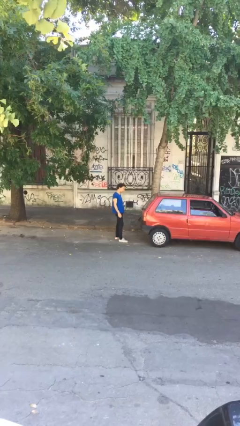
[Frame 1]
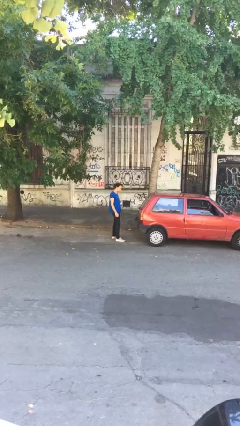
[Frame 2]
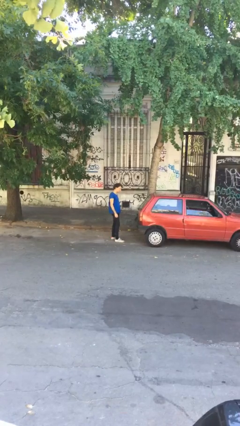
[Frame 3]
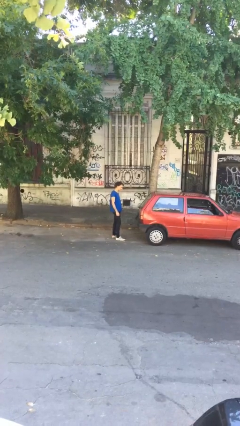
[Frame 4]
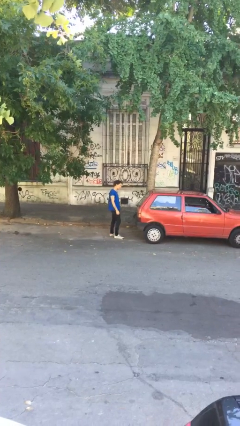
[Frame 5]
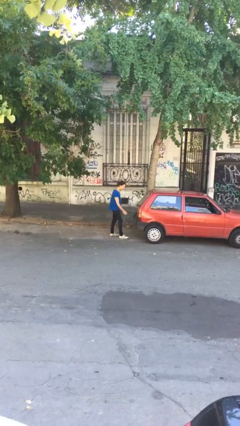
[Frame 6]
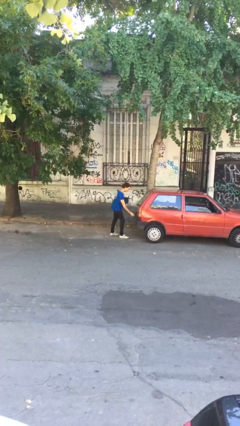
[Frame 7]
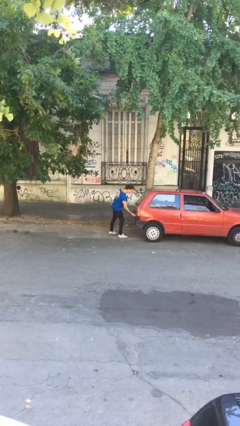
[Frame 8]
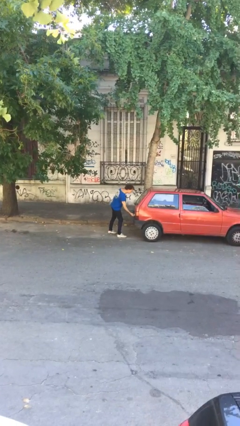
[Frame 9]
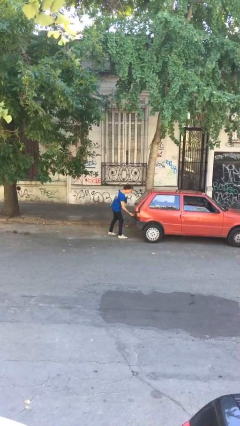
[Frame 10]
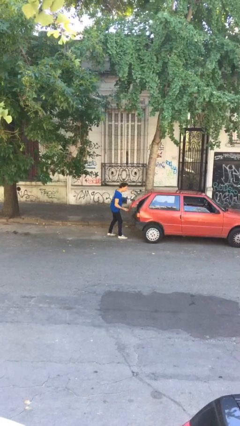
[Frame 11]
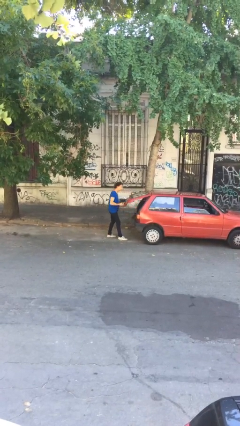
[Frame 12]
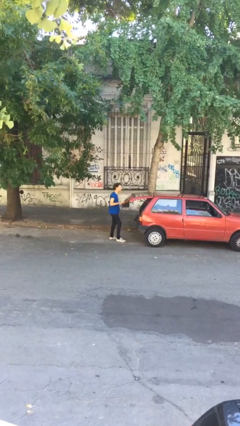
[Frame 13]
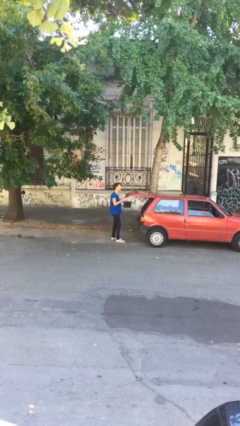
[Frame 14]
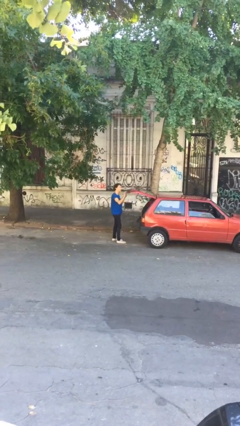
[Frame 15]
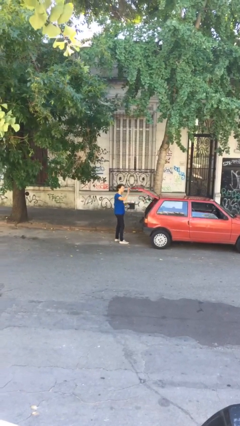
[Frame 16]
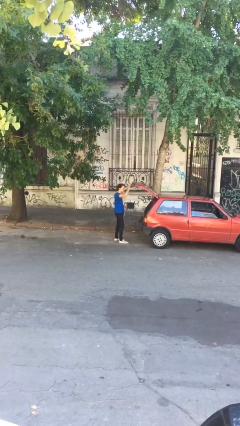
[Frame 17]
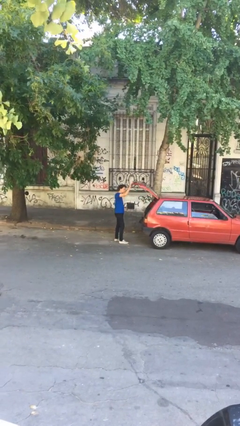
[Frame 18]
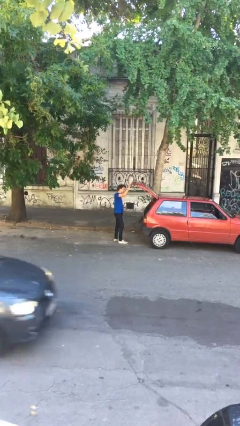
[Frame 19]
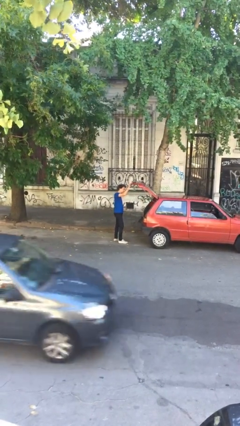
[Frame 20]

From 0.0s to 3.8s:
person opens car trunk

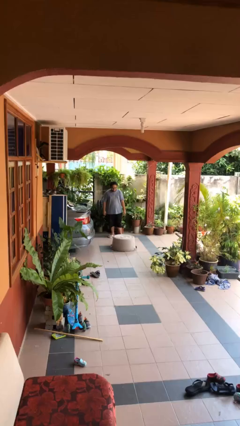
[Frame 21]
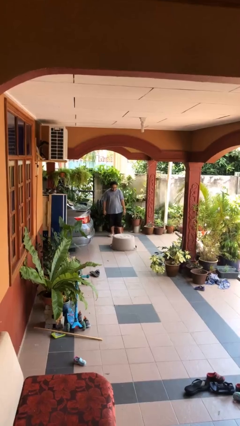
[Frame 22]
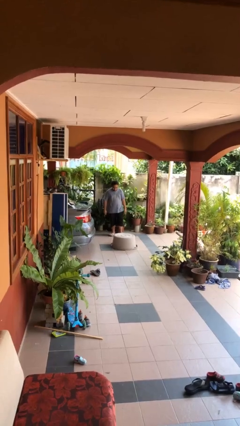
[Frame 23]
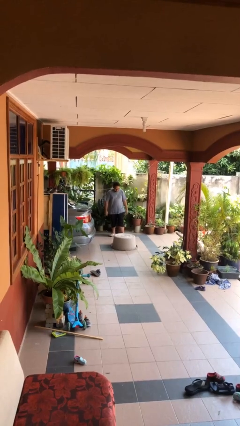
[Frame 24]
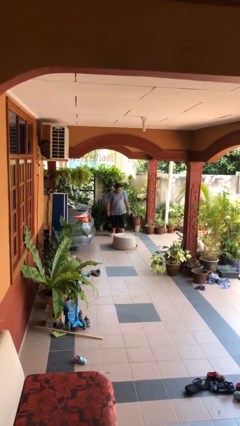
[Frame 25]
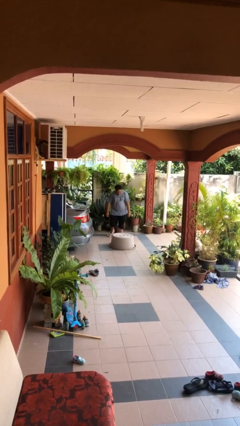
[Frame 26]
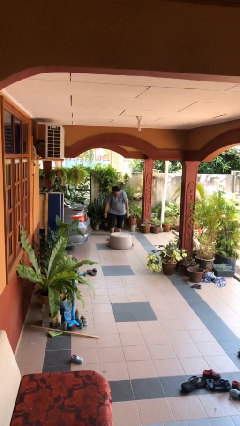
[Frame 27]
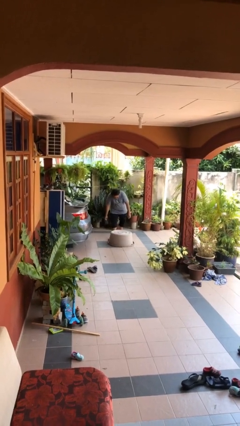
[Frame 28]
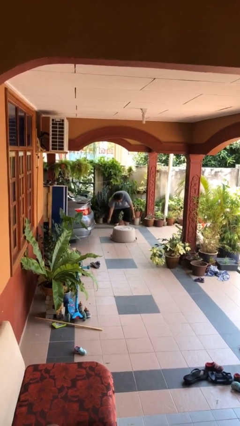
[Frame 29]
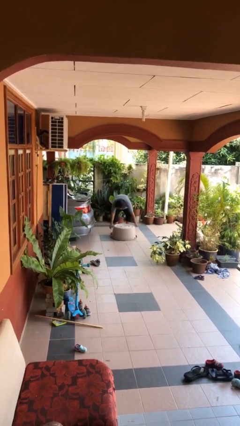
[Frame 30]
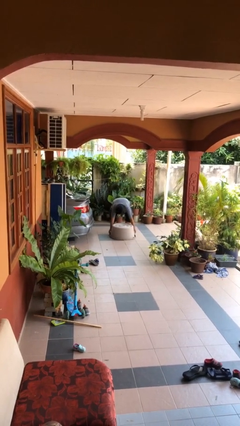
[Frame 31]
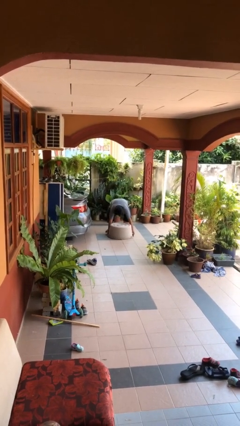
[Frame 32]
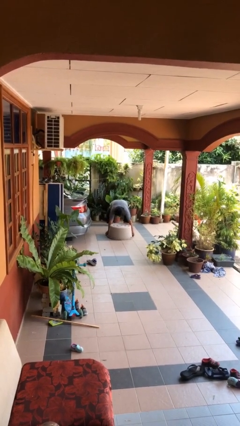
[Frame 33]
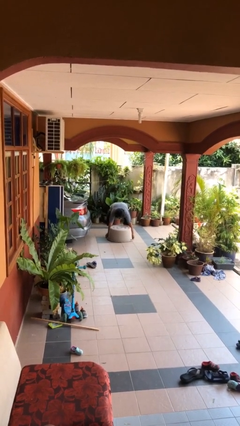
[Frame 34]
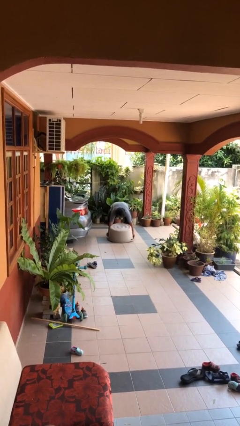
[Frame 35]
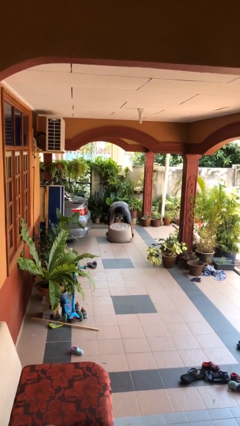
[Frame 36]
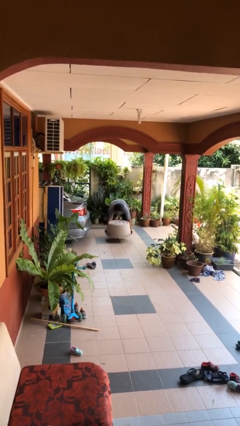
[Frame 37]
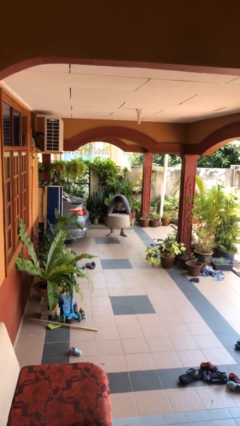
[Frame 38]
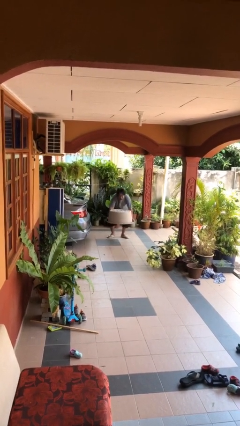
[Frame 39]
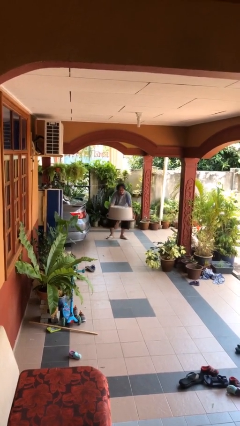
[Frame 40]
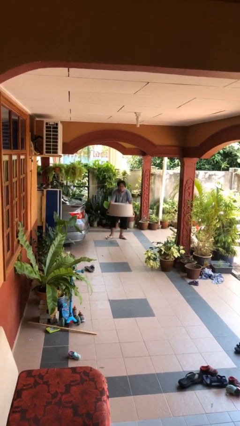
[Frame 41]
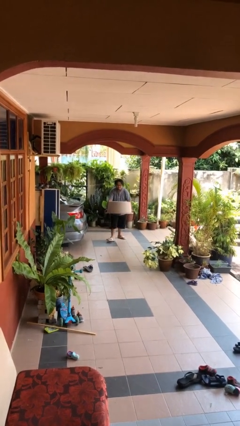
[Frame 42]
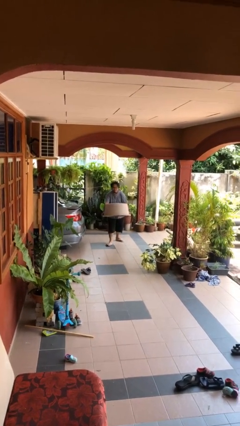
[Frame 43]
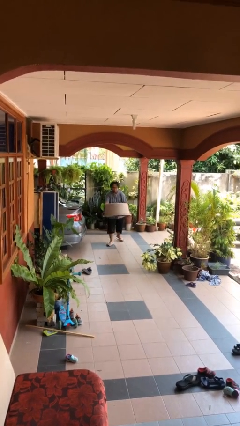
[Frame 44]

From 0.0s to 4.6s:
person picks up object from floor

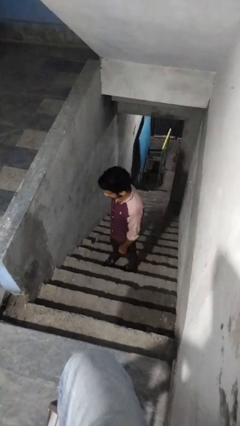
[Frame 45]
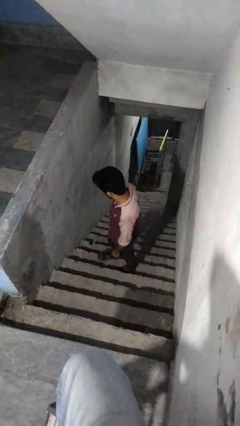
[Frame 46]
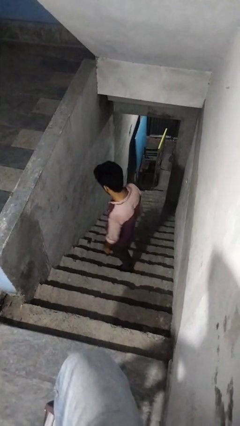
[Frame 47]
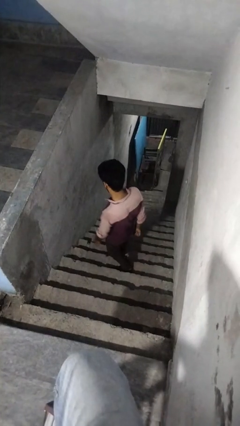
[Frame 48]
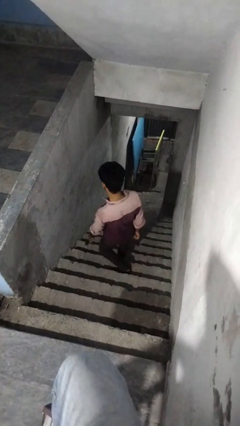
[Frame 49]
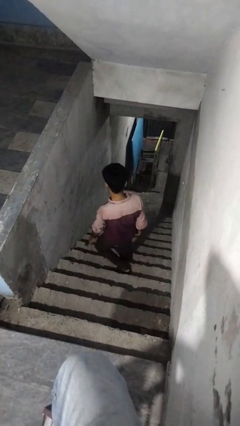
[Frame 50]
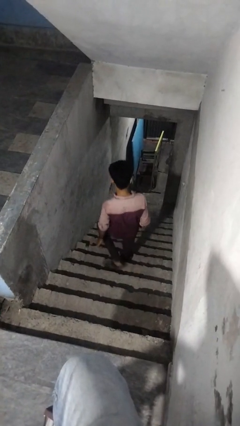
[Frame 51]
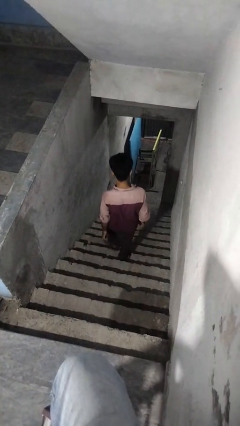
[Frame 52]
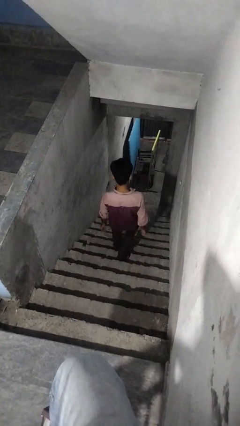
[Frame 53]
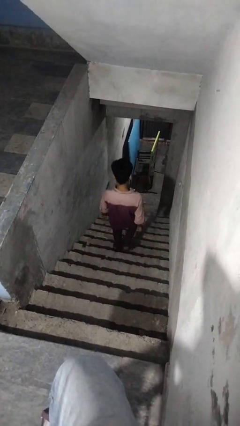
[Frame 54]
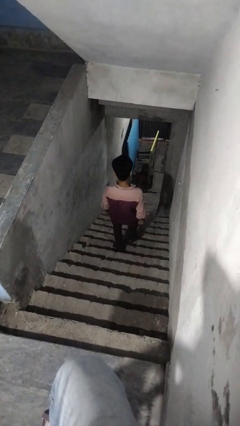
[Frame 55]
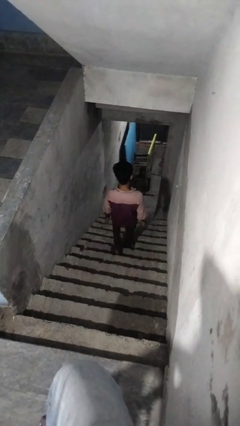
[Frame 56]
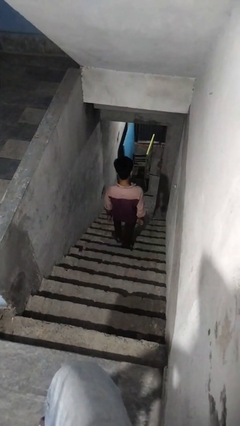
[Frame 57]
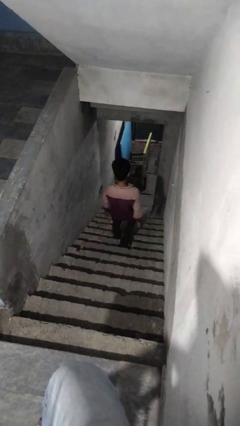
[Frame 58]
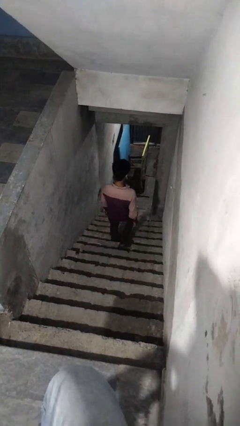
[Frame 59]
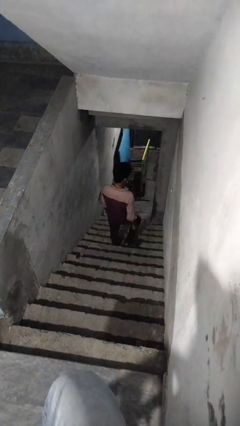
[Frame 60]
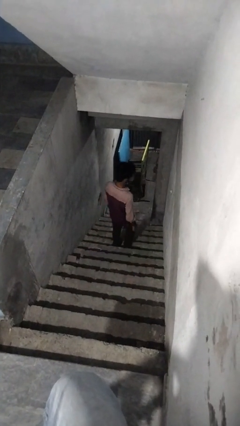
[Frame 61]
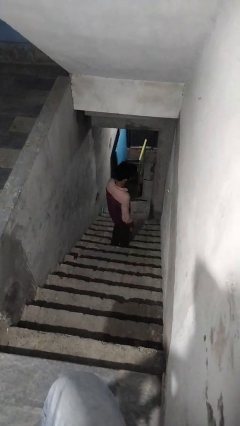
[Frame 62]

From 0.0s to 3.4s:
person climbs down stairs

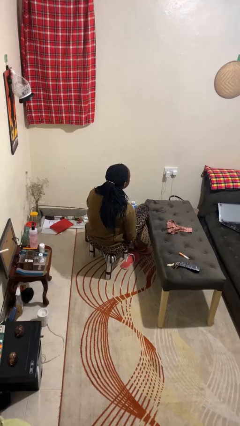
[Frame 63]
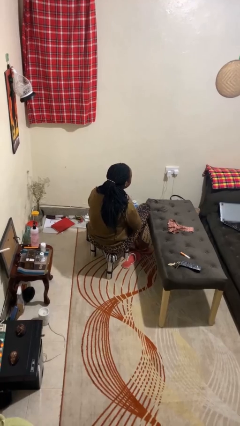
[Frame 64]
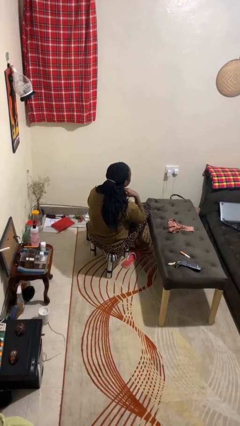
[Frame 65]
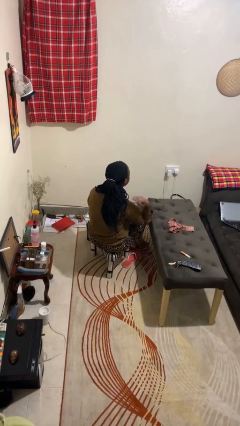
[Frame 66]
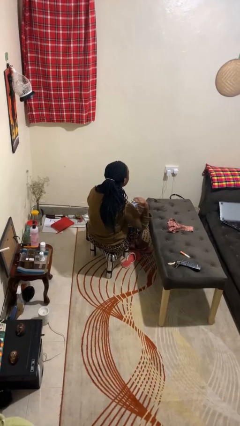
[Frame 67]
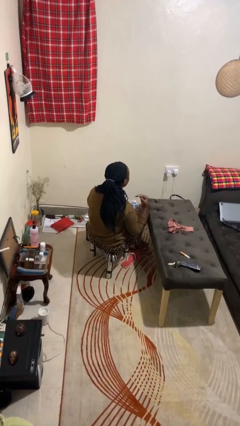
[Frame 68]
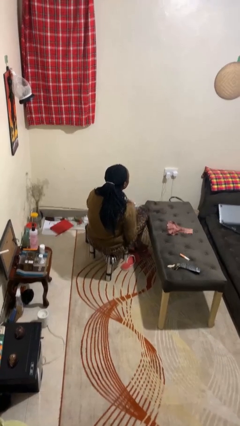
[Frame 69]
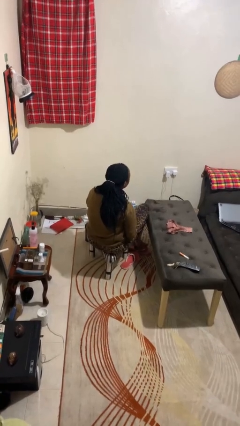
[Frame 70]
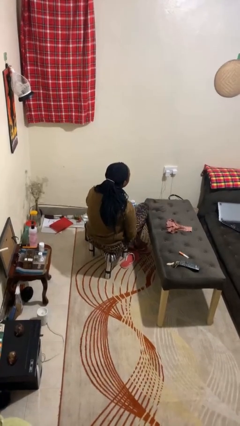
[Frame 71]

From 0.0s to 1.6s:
person gestures cut

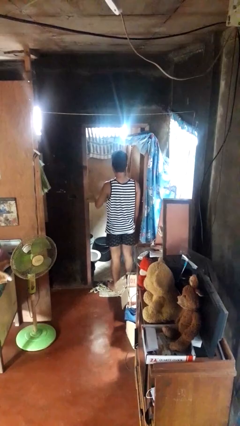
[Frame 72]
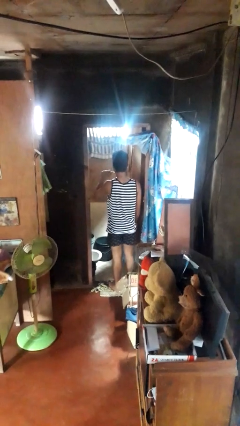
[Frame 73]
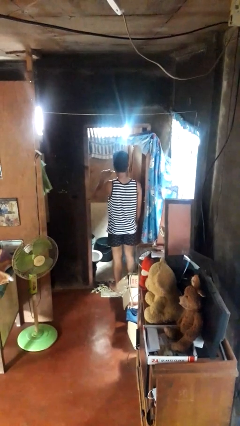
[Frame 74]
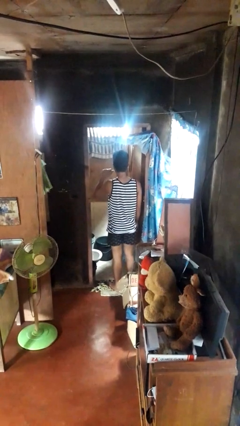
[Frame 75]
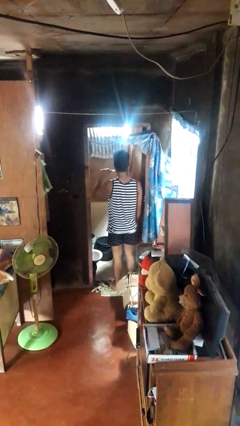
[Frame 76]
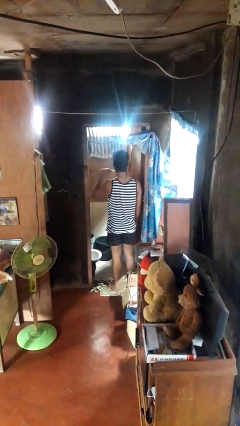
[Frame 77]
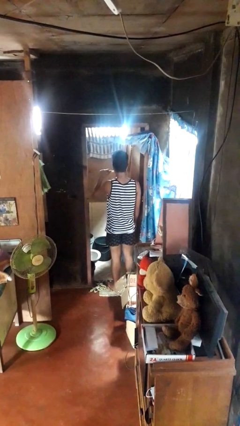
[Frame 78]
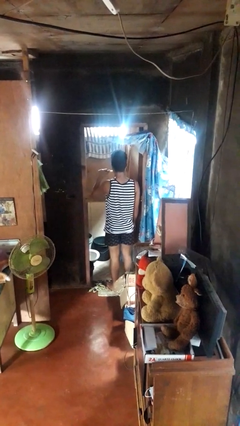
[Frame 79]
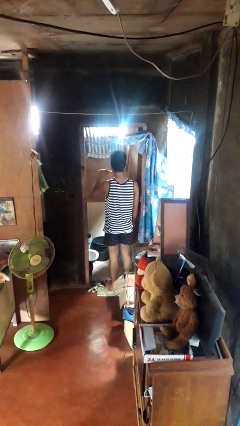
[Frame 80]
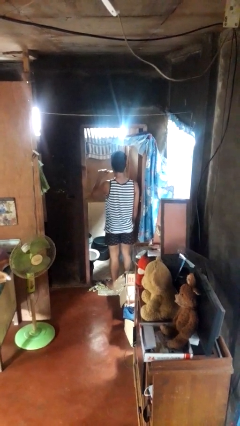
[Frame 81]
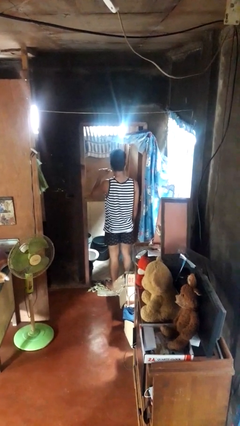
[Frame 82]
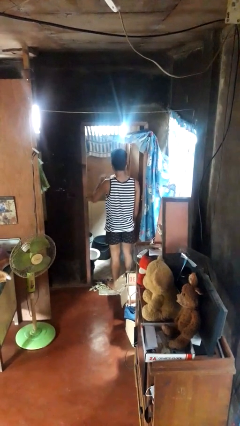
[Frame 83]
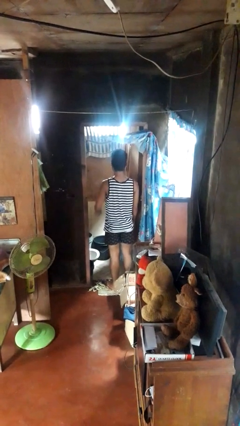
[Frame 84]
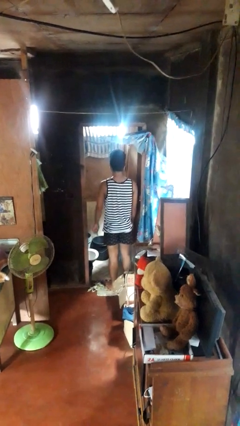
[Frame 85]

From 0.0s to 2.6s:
person brushes teeth

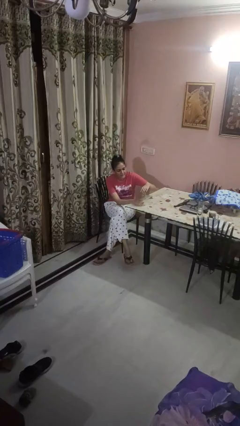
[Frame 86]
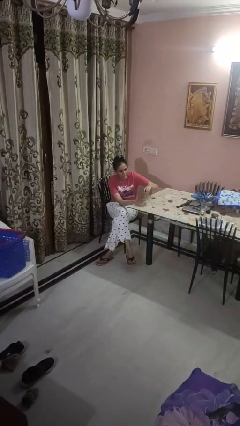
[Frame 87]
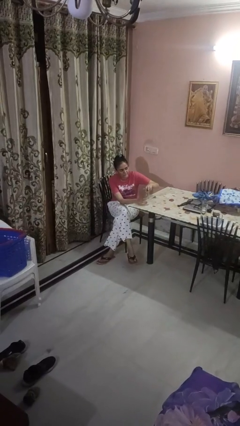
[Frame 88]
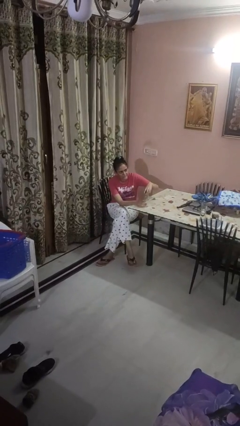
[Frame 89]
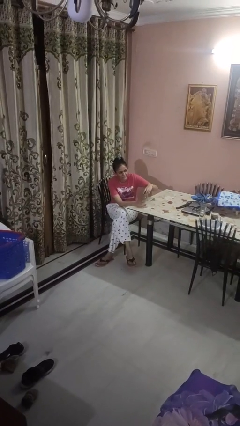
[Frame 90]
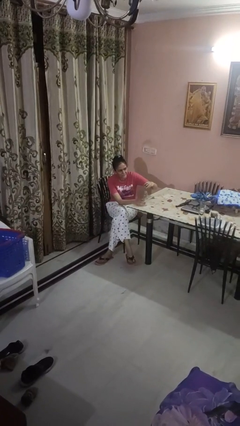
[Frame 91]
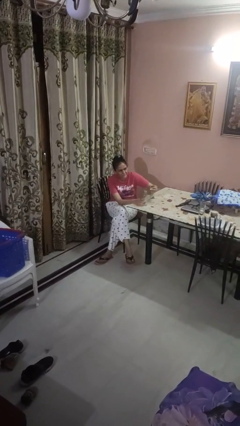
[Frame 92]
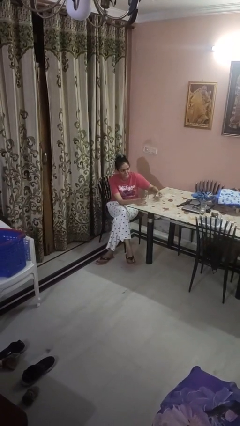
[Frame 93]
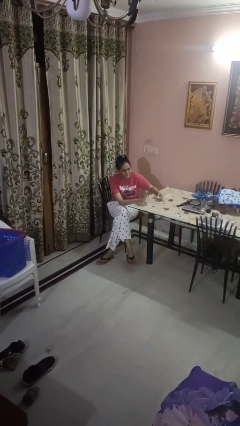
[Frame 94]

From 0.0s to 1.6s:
person unscrews lid from bottle
